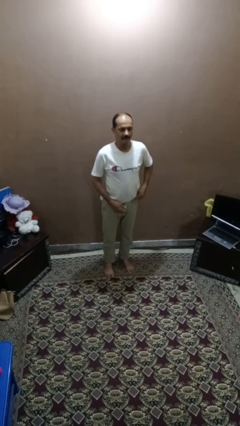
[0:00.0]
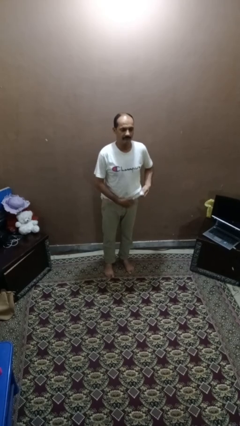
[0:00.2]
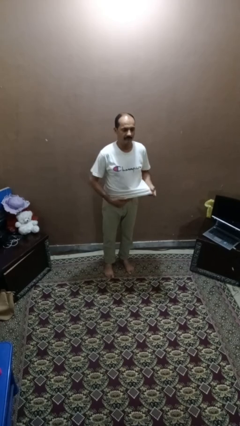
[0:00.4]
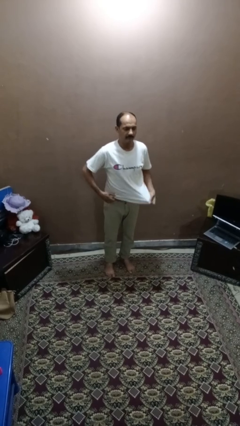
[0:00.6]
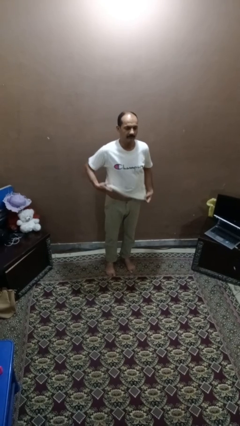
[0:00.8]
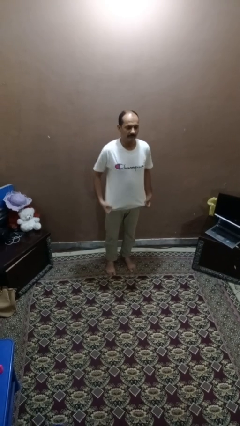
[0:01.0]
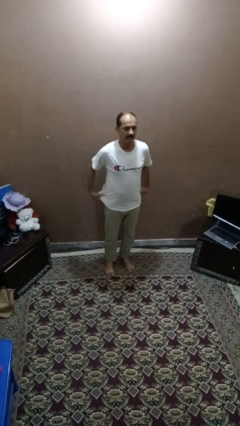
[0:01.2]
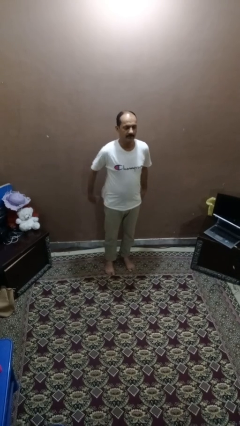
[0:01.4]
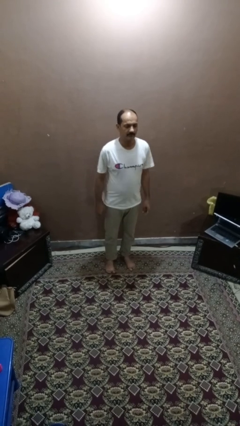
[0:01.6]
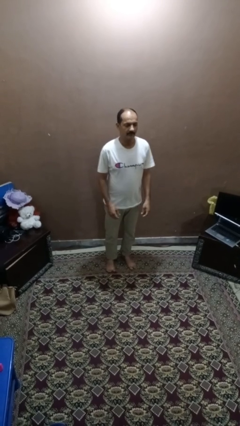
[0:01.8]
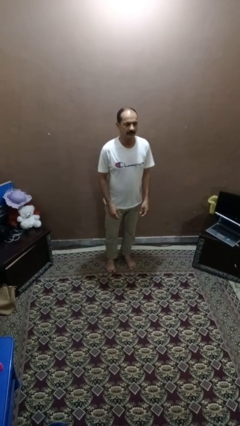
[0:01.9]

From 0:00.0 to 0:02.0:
person untucks shirt

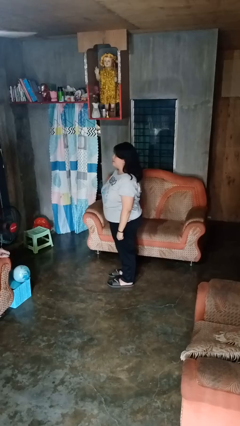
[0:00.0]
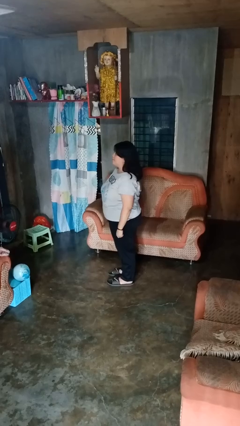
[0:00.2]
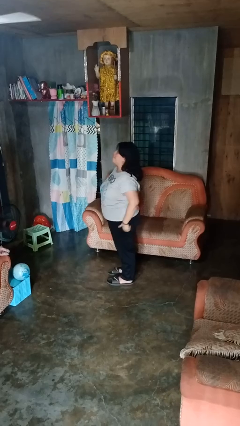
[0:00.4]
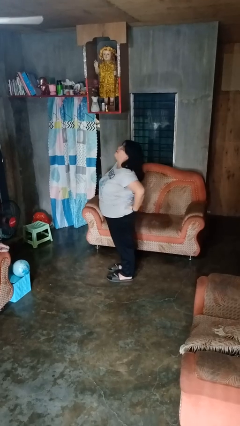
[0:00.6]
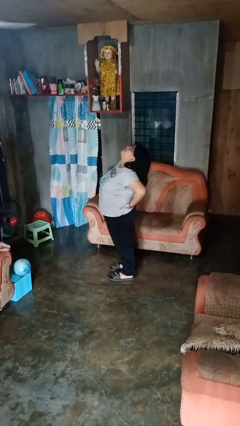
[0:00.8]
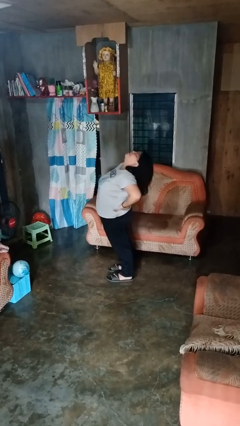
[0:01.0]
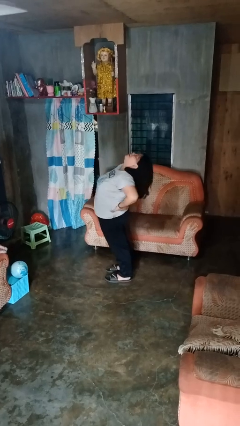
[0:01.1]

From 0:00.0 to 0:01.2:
person stretches back

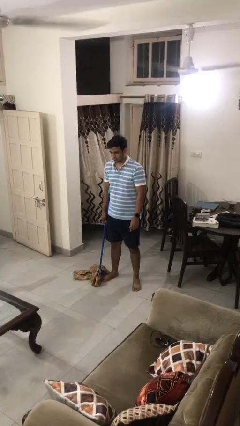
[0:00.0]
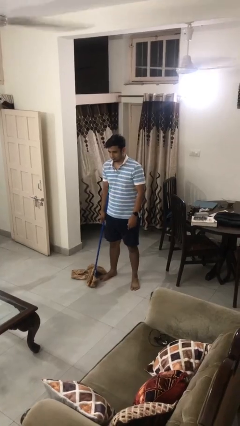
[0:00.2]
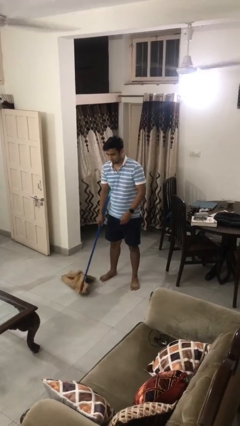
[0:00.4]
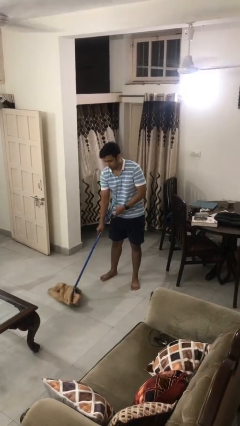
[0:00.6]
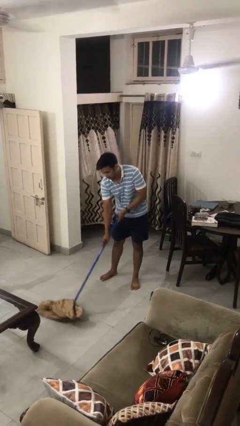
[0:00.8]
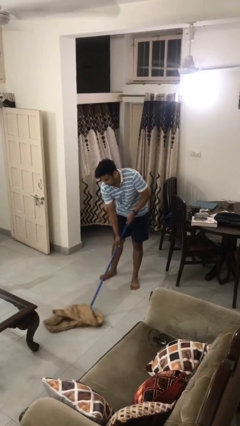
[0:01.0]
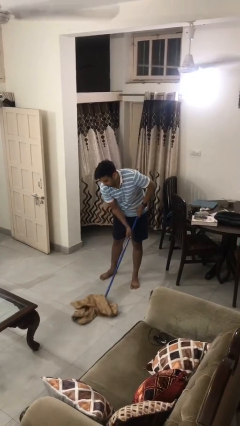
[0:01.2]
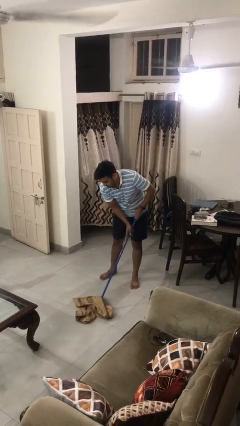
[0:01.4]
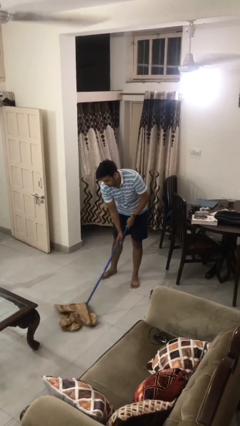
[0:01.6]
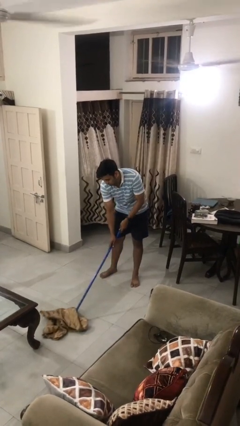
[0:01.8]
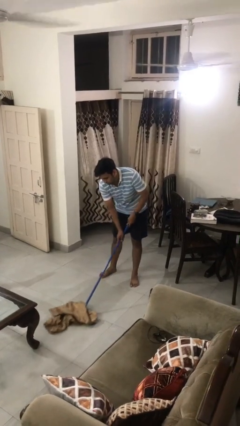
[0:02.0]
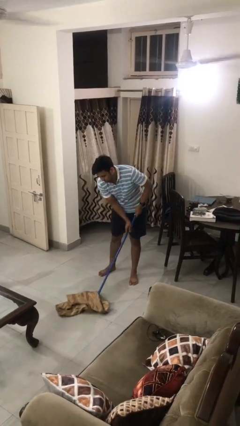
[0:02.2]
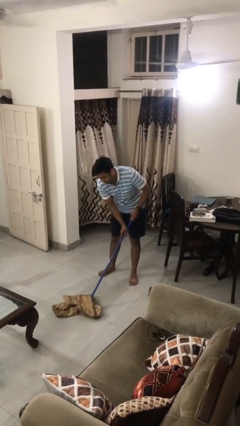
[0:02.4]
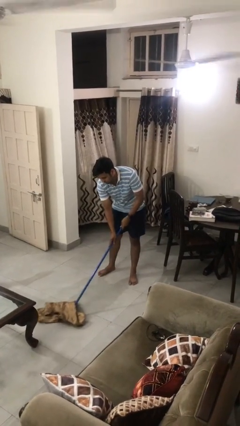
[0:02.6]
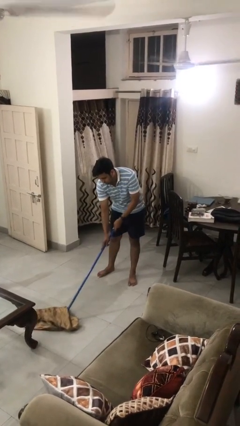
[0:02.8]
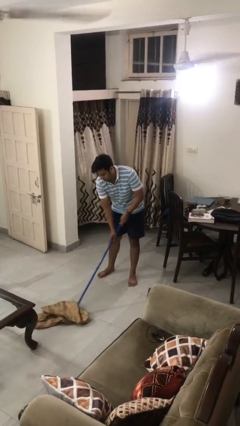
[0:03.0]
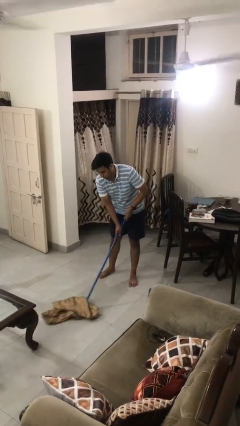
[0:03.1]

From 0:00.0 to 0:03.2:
person mops

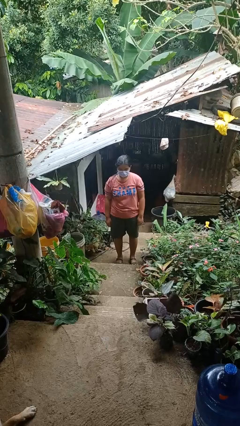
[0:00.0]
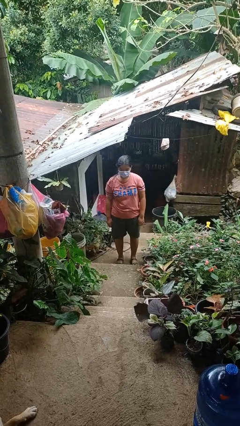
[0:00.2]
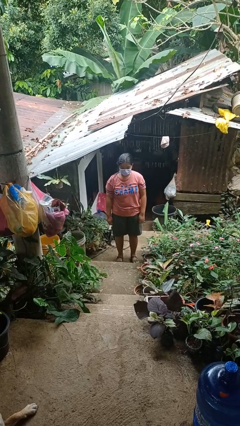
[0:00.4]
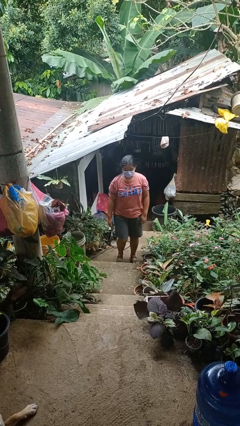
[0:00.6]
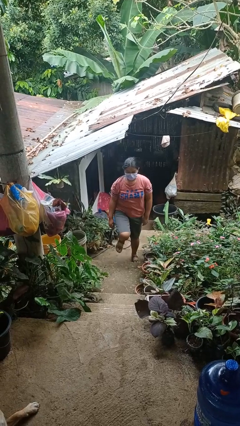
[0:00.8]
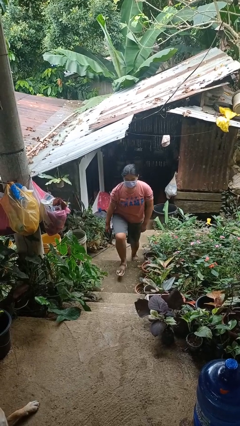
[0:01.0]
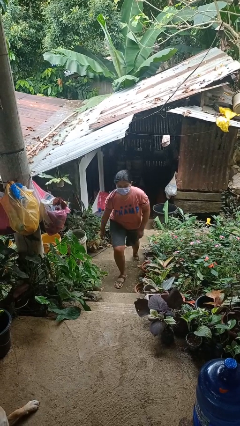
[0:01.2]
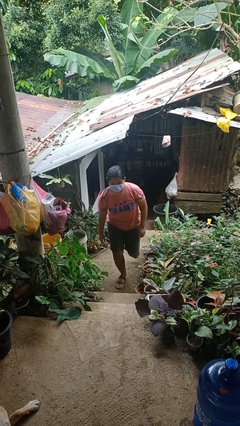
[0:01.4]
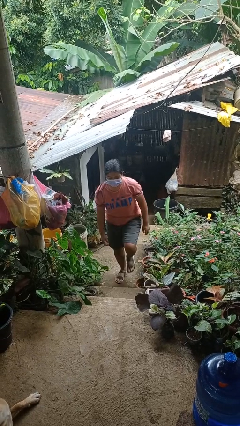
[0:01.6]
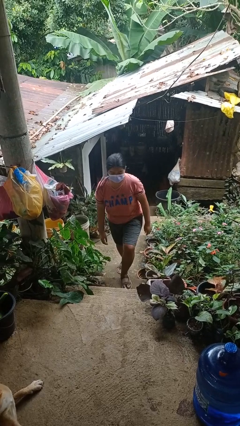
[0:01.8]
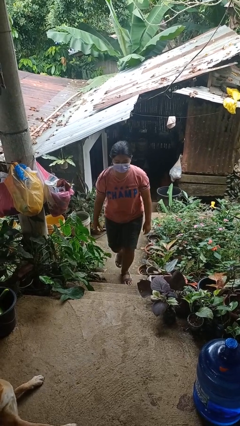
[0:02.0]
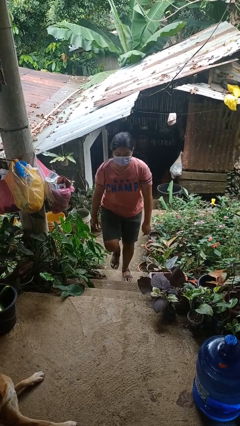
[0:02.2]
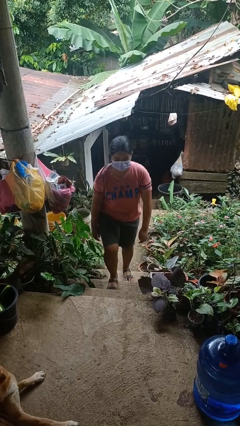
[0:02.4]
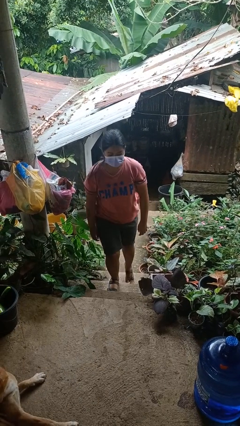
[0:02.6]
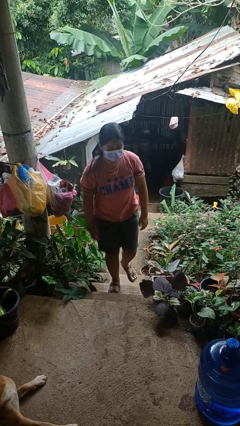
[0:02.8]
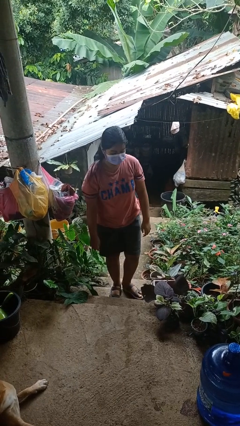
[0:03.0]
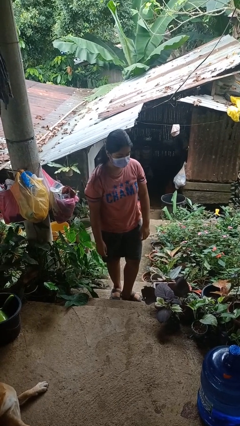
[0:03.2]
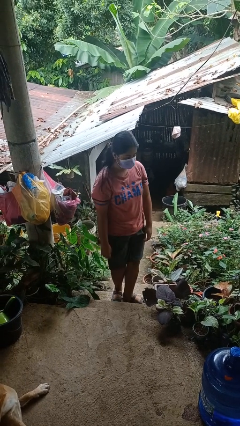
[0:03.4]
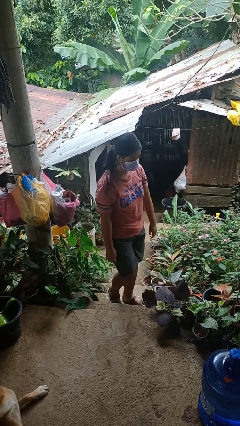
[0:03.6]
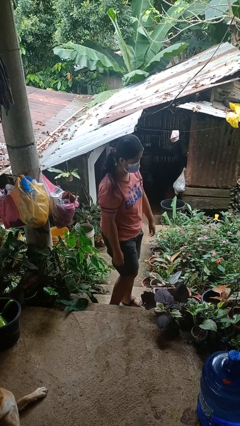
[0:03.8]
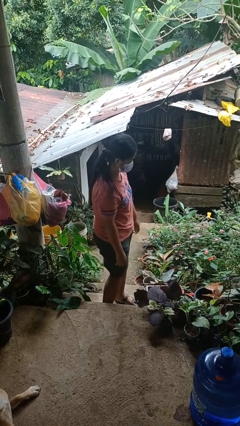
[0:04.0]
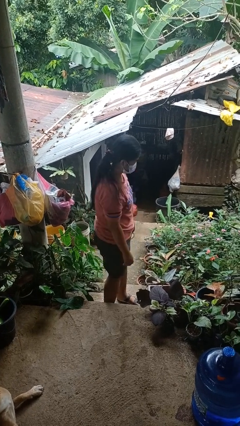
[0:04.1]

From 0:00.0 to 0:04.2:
person climbs up stairs

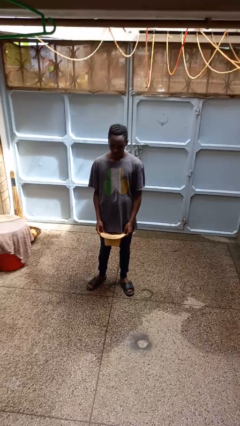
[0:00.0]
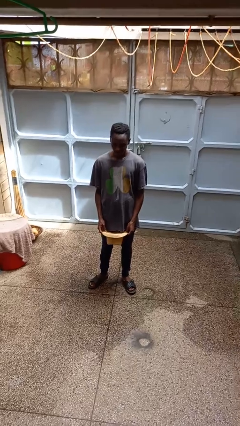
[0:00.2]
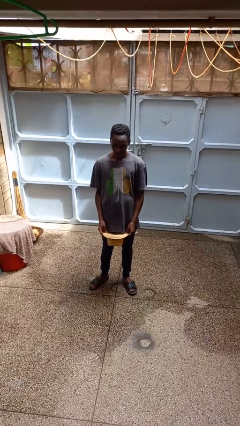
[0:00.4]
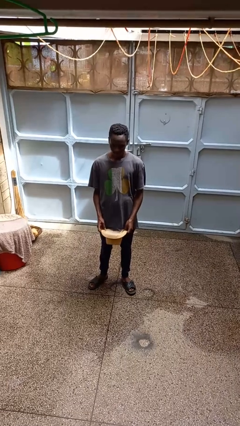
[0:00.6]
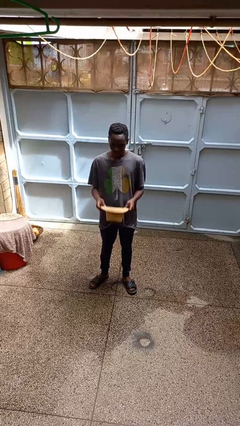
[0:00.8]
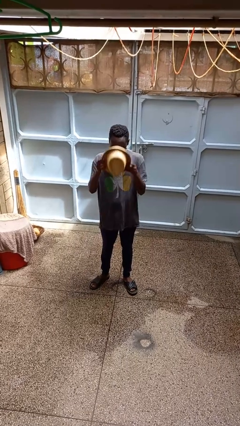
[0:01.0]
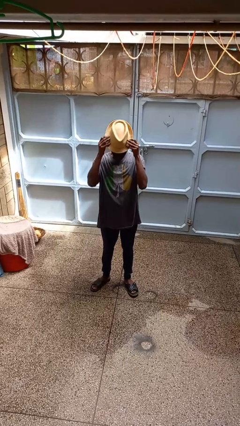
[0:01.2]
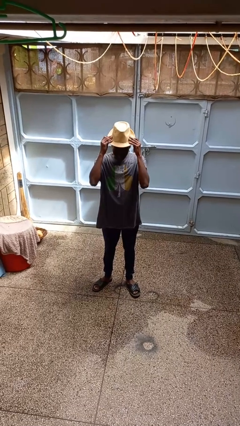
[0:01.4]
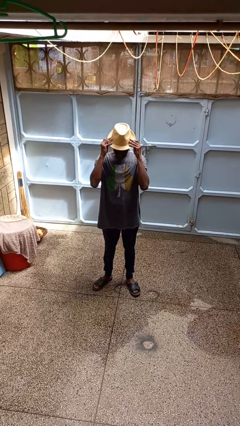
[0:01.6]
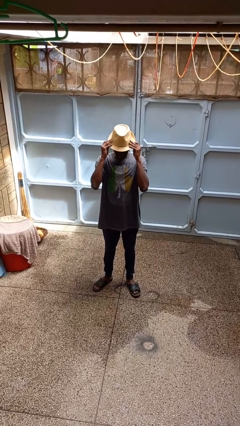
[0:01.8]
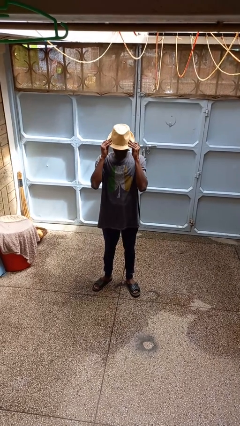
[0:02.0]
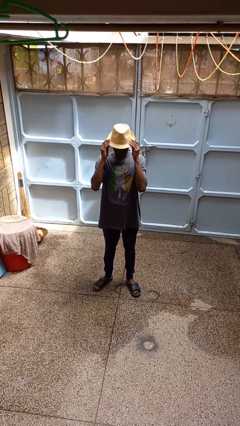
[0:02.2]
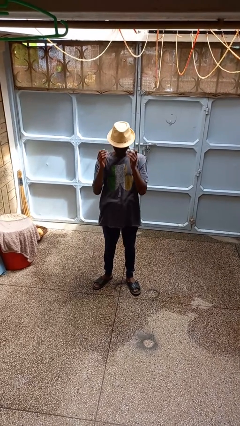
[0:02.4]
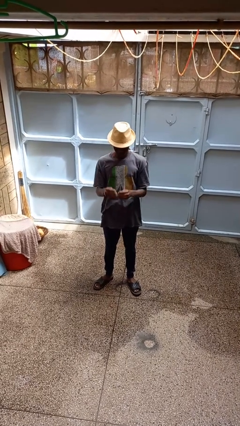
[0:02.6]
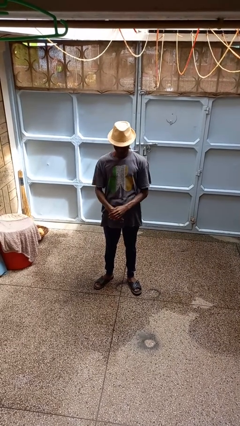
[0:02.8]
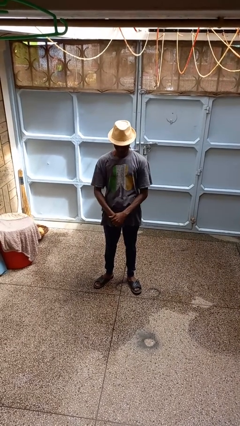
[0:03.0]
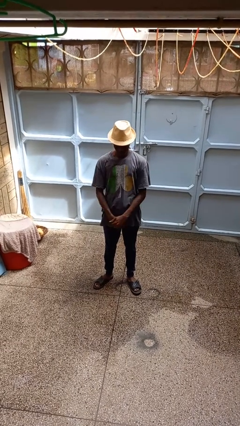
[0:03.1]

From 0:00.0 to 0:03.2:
person puts on hat

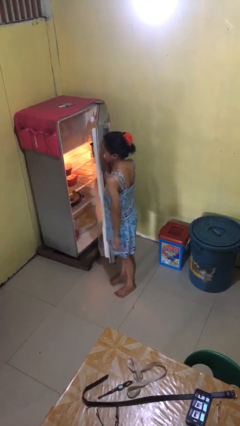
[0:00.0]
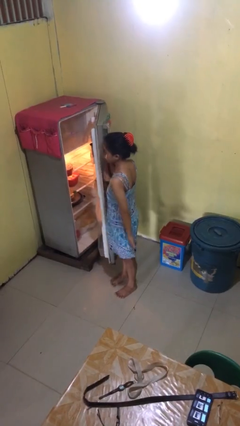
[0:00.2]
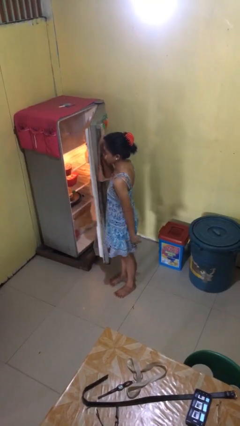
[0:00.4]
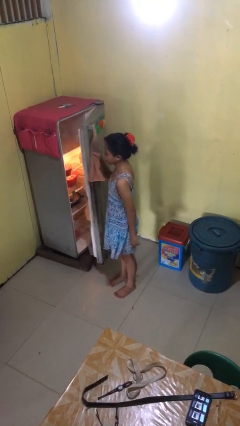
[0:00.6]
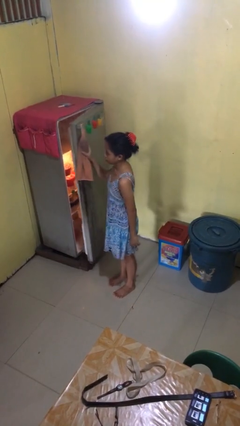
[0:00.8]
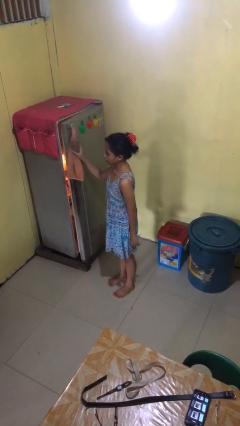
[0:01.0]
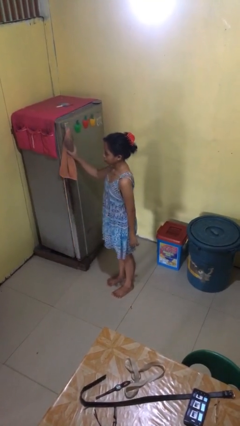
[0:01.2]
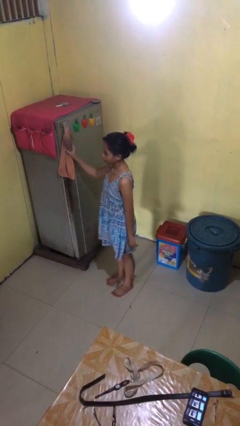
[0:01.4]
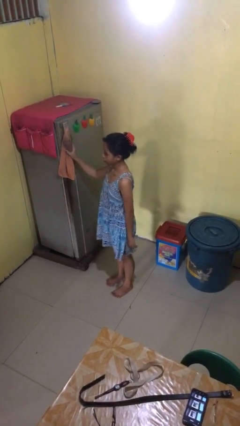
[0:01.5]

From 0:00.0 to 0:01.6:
person closes refrigerator

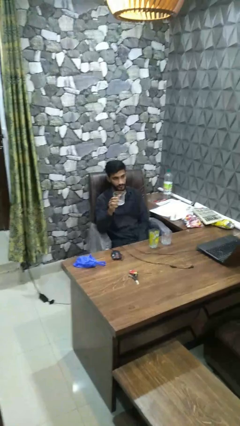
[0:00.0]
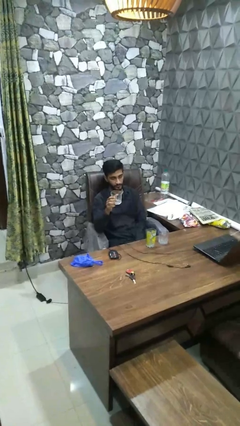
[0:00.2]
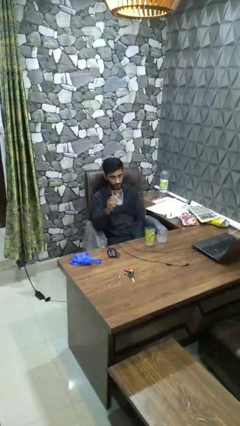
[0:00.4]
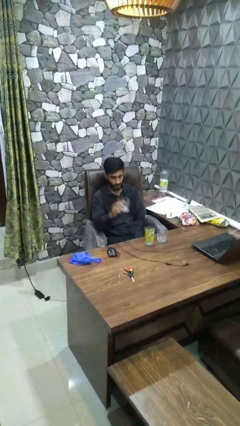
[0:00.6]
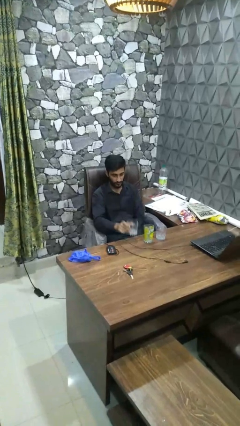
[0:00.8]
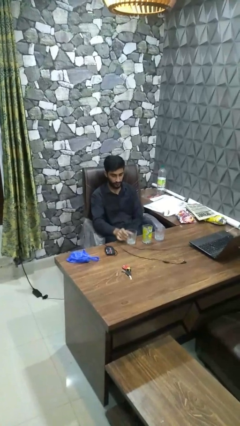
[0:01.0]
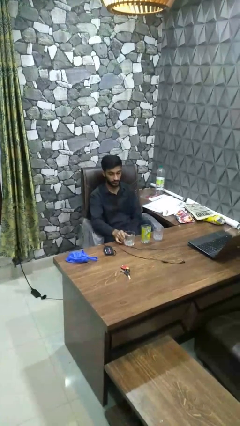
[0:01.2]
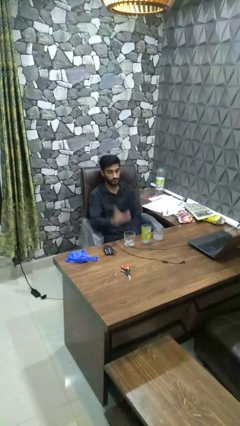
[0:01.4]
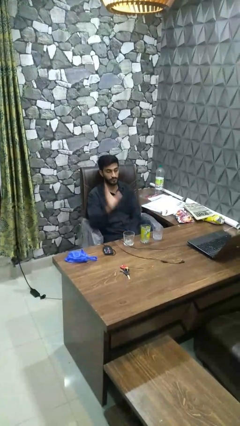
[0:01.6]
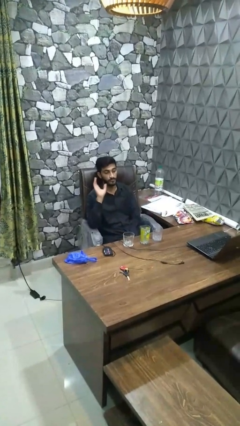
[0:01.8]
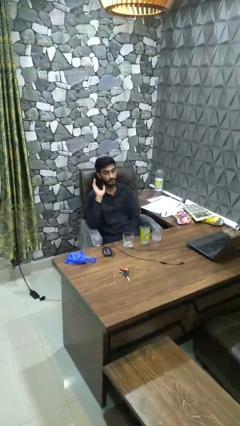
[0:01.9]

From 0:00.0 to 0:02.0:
person puts down object on table
